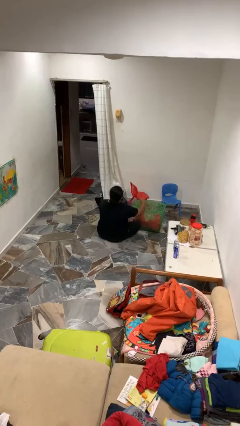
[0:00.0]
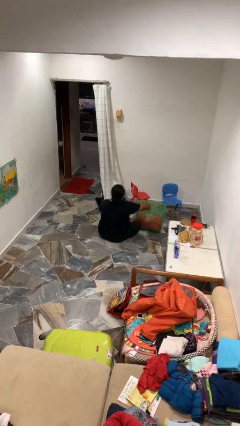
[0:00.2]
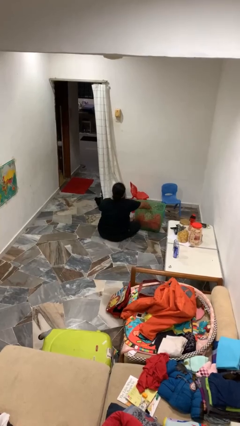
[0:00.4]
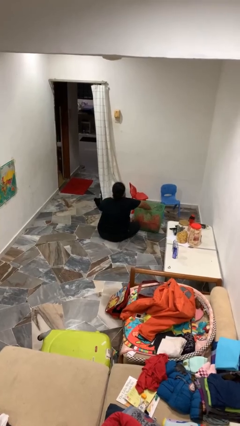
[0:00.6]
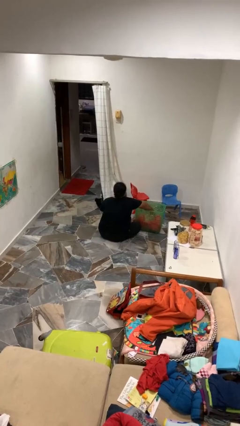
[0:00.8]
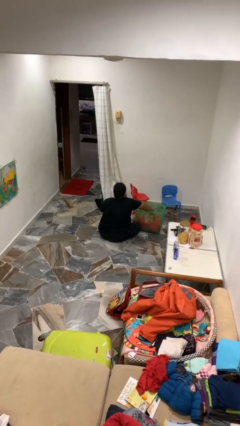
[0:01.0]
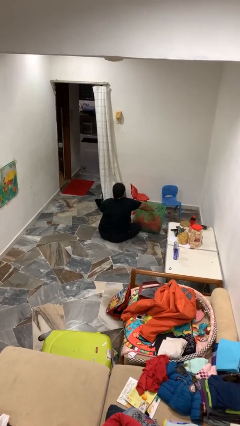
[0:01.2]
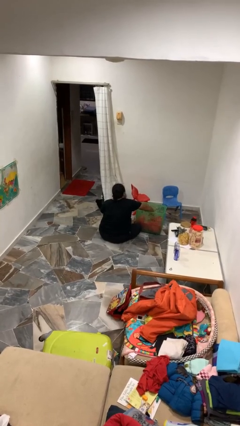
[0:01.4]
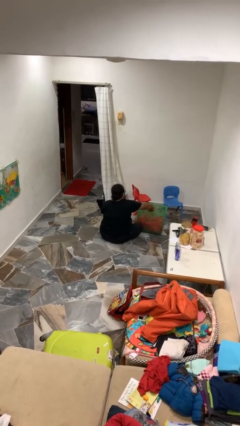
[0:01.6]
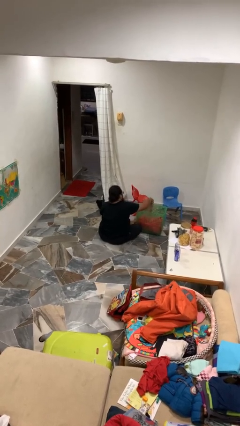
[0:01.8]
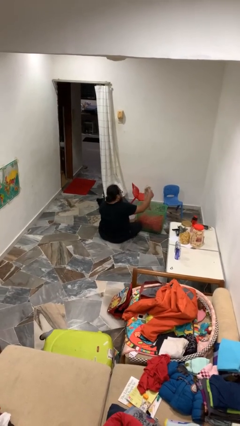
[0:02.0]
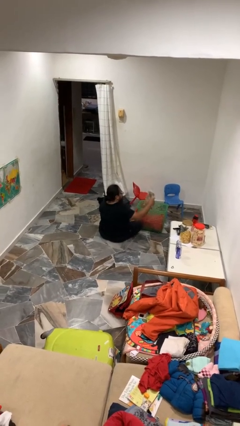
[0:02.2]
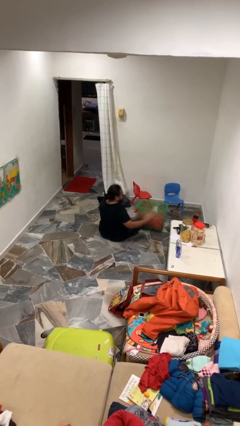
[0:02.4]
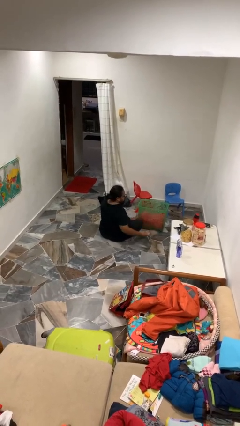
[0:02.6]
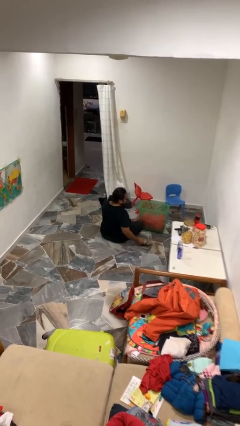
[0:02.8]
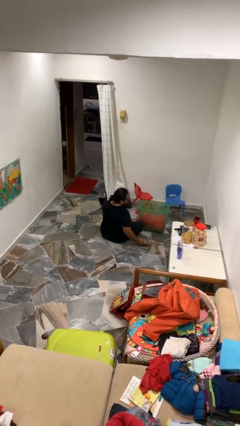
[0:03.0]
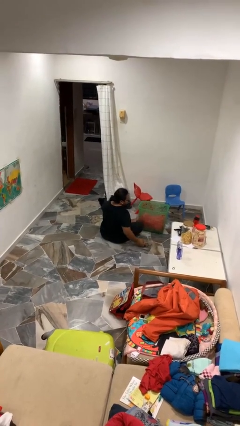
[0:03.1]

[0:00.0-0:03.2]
person takes object from basket

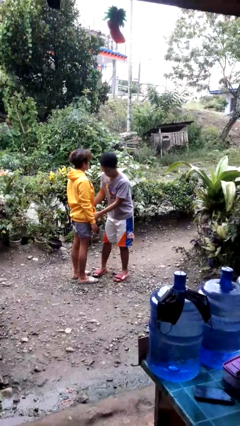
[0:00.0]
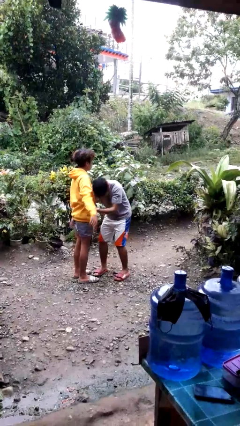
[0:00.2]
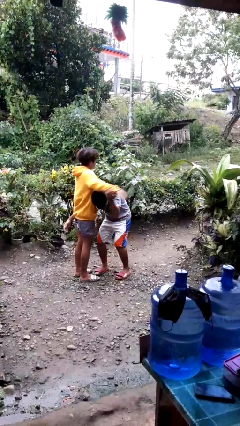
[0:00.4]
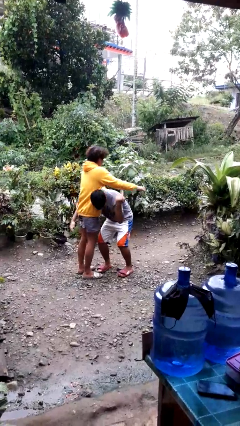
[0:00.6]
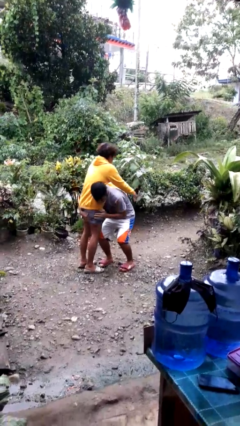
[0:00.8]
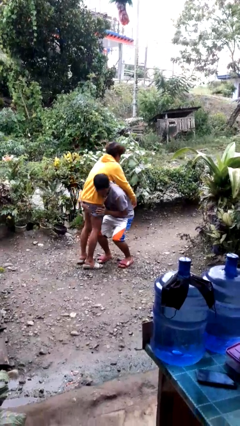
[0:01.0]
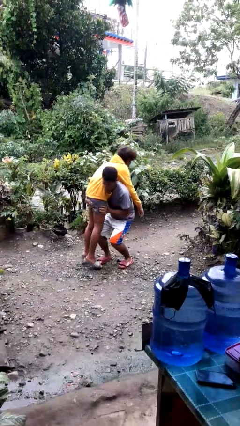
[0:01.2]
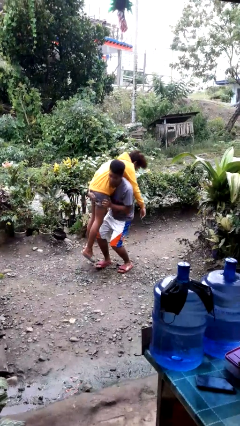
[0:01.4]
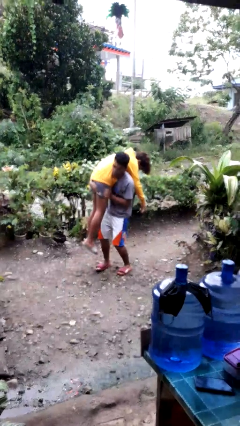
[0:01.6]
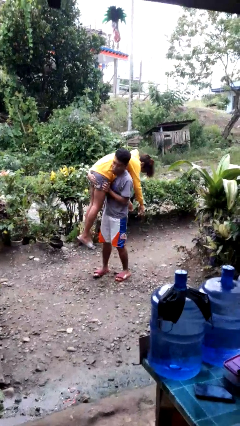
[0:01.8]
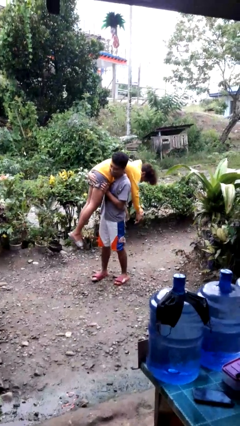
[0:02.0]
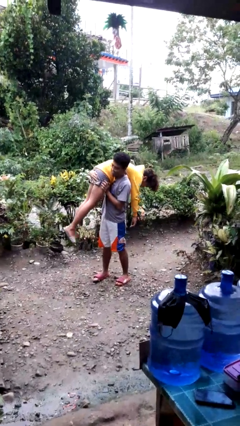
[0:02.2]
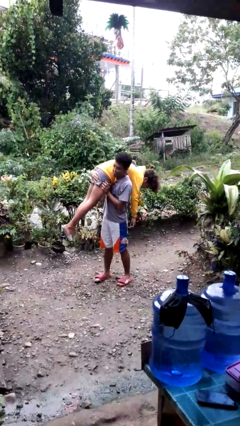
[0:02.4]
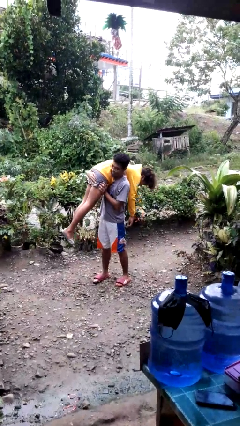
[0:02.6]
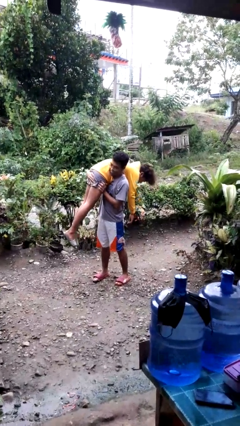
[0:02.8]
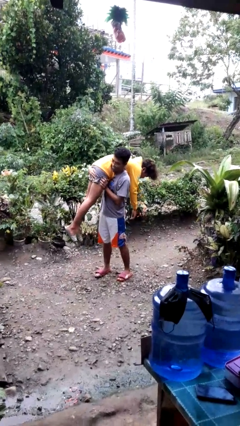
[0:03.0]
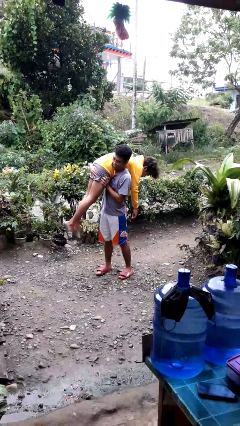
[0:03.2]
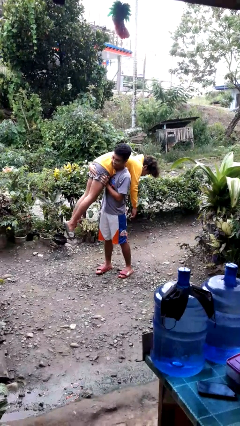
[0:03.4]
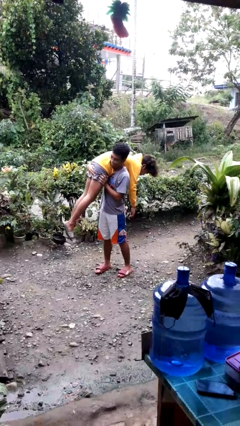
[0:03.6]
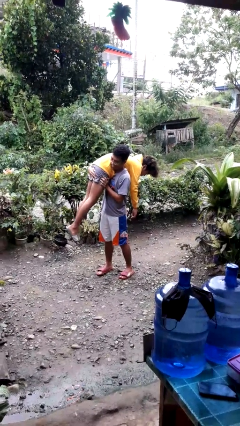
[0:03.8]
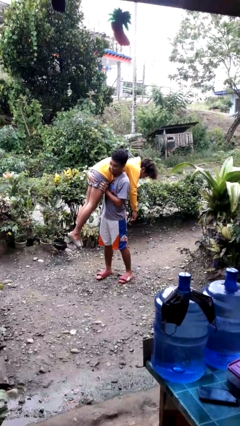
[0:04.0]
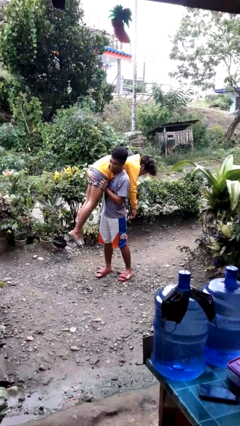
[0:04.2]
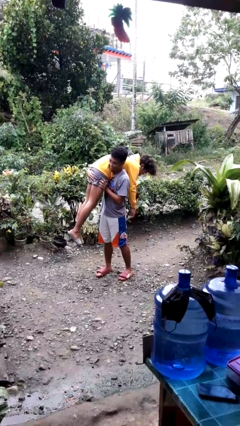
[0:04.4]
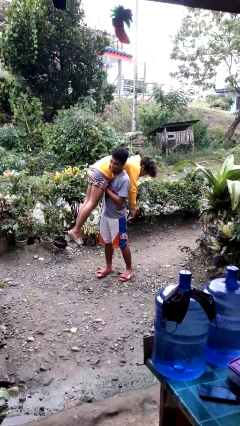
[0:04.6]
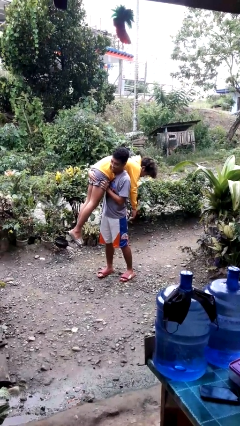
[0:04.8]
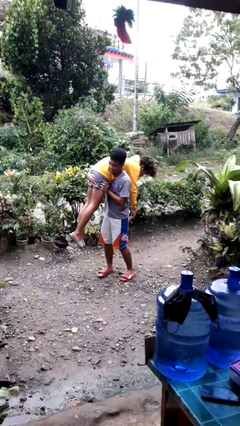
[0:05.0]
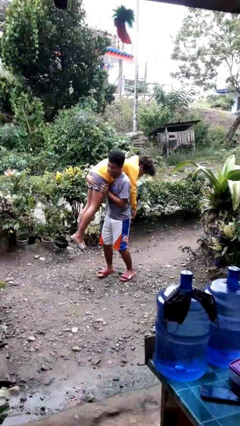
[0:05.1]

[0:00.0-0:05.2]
person carries person over shoulder

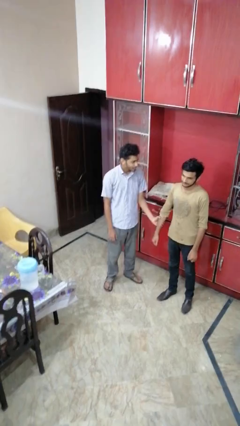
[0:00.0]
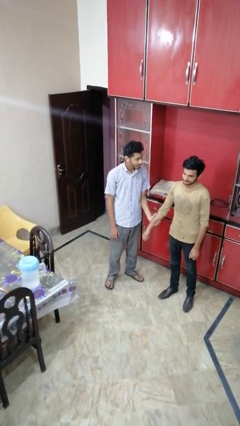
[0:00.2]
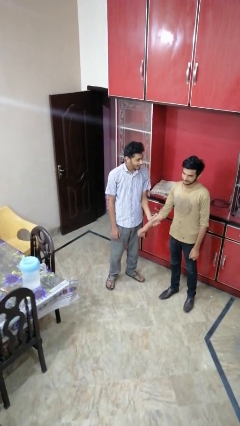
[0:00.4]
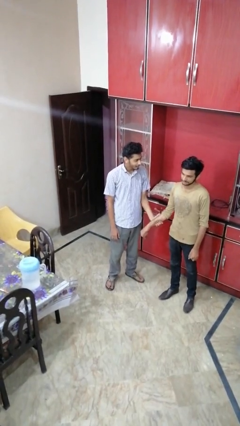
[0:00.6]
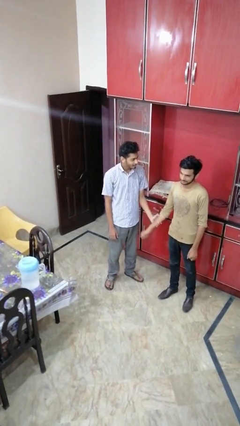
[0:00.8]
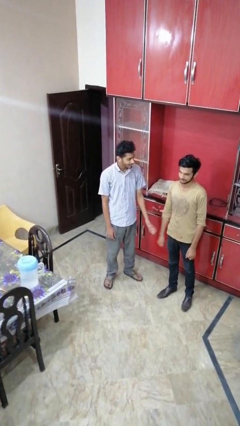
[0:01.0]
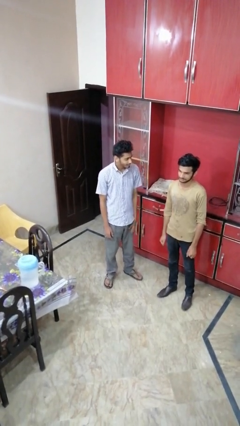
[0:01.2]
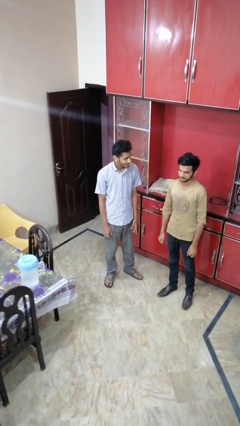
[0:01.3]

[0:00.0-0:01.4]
person grabs person by forearm

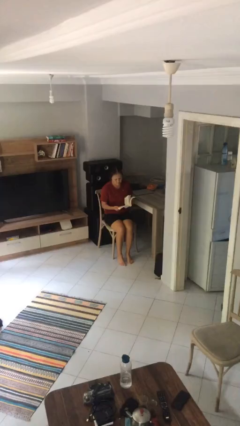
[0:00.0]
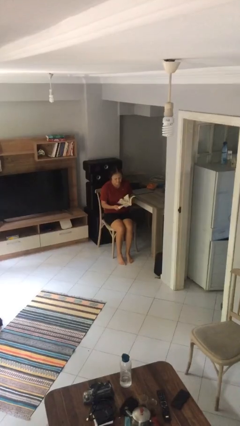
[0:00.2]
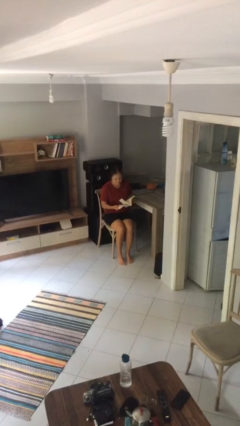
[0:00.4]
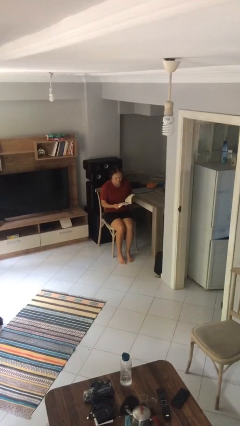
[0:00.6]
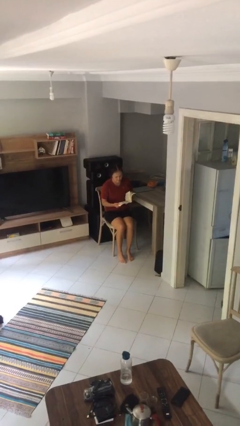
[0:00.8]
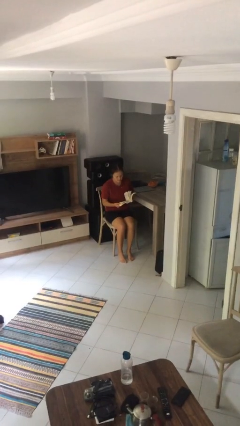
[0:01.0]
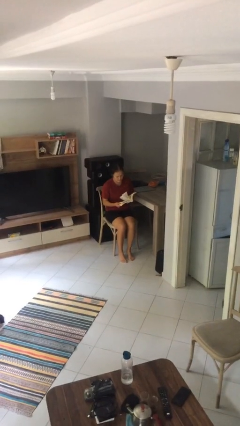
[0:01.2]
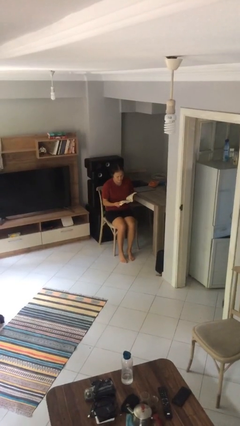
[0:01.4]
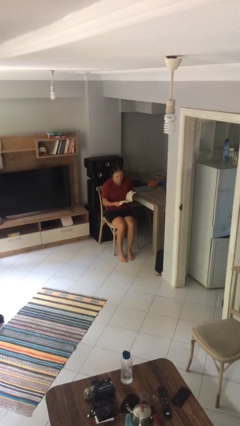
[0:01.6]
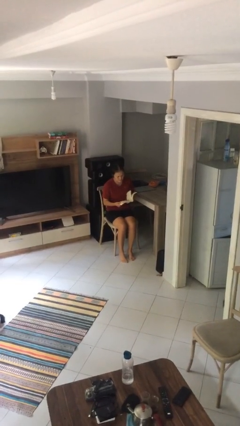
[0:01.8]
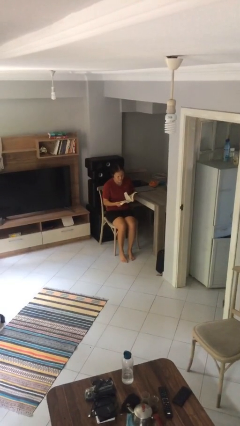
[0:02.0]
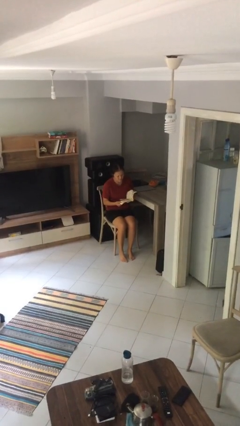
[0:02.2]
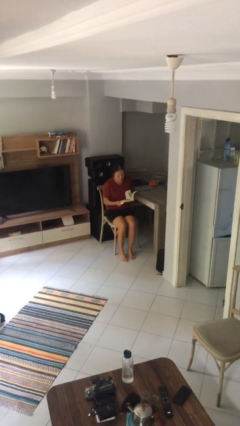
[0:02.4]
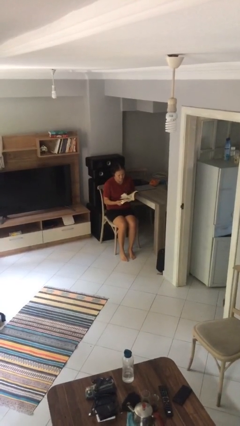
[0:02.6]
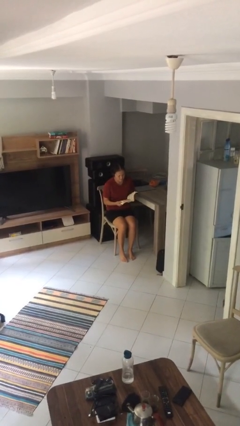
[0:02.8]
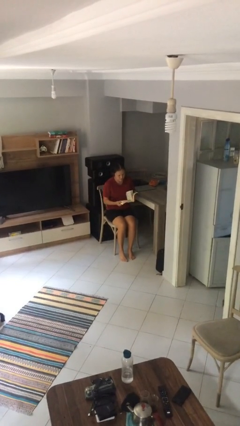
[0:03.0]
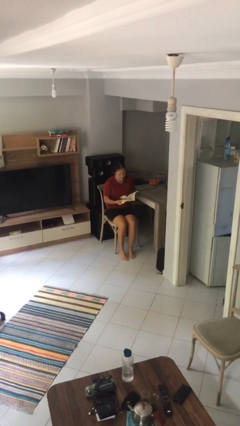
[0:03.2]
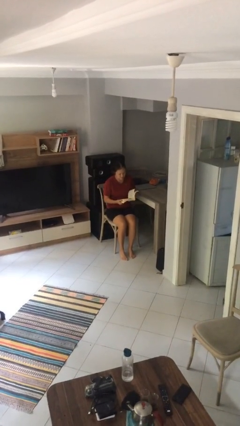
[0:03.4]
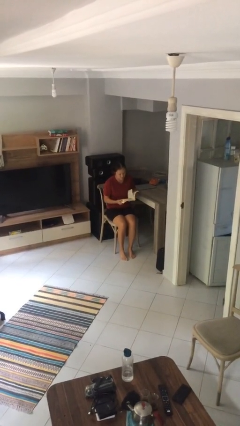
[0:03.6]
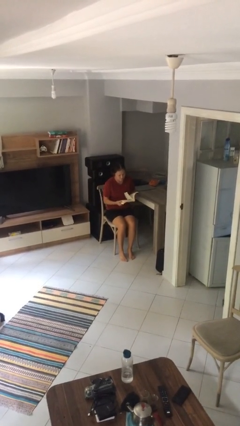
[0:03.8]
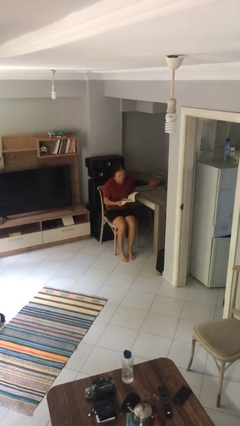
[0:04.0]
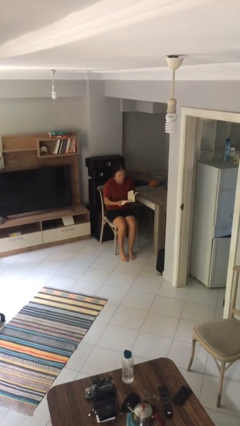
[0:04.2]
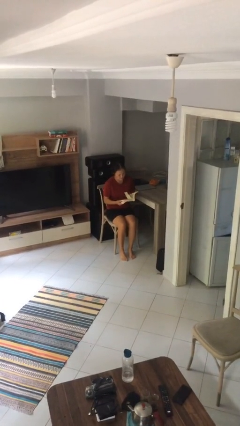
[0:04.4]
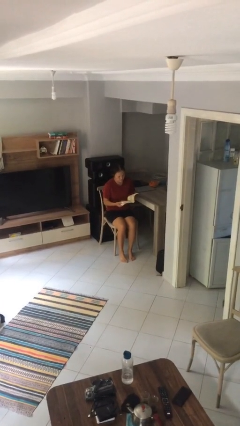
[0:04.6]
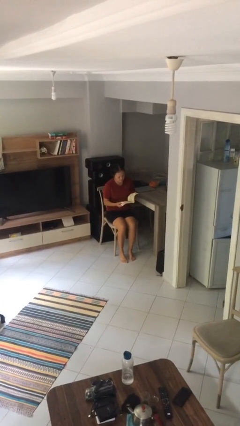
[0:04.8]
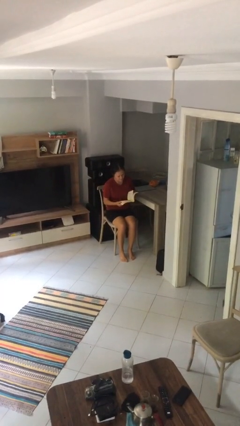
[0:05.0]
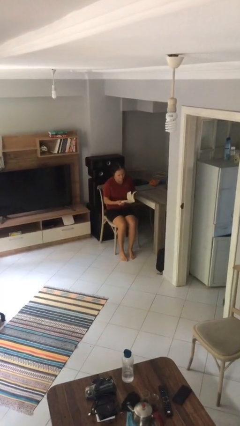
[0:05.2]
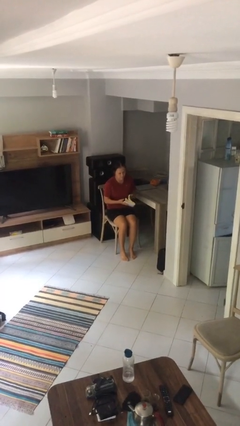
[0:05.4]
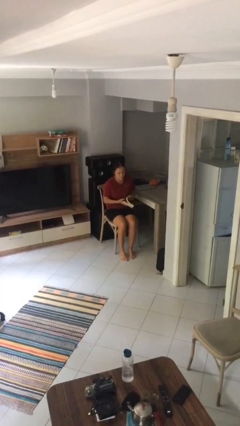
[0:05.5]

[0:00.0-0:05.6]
person reads document

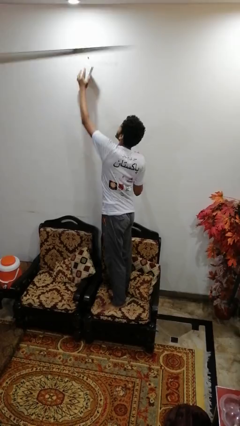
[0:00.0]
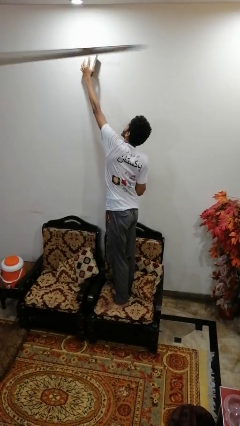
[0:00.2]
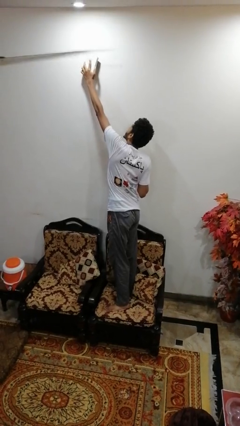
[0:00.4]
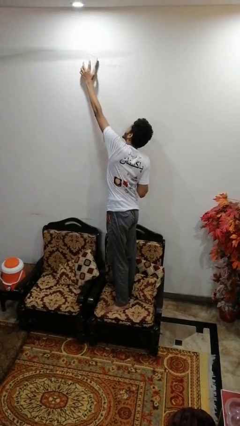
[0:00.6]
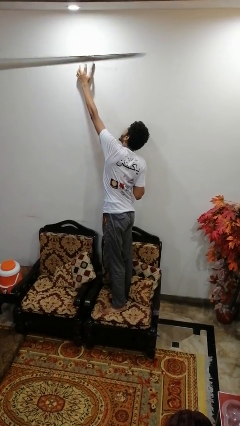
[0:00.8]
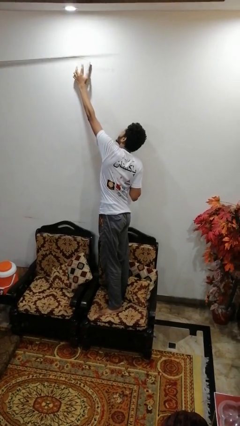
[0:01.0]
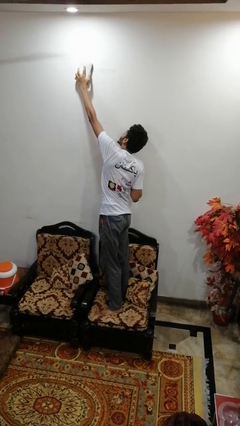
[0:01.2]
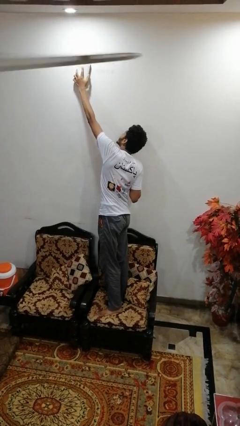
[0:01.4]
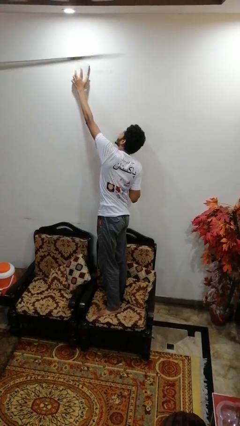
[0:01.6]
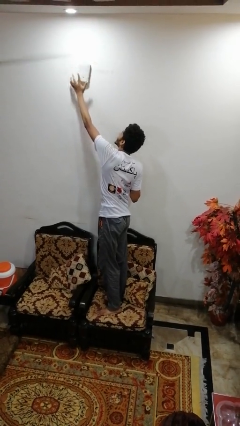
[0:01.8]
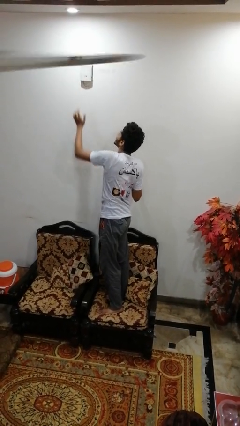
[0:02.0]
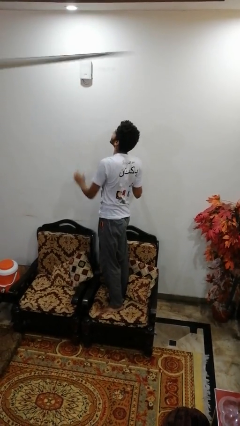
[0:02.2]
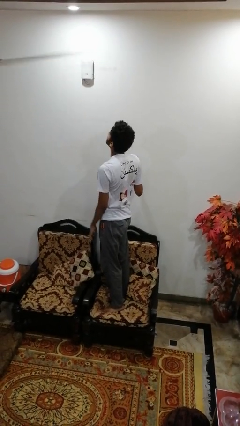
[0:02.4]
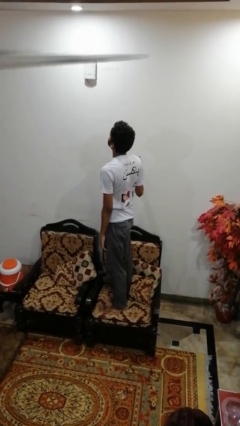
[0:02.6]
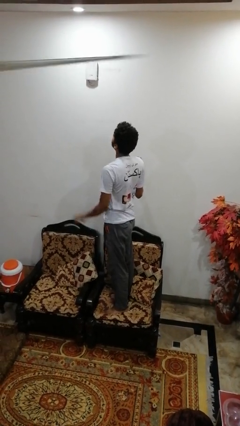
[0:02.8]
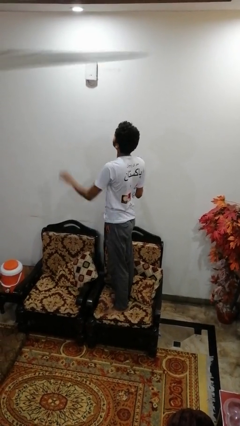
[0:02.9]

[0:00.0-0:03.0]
person puts up smoke detector
